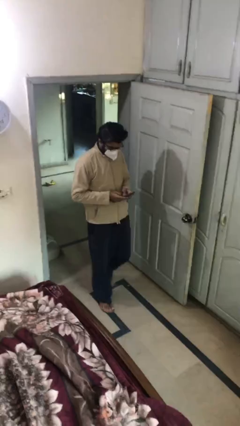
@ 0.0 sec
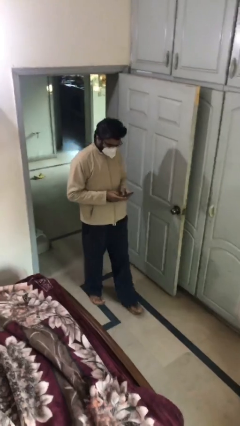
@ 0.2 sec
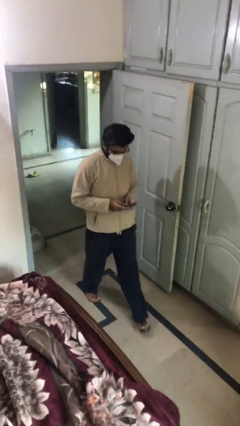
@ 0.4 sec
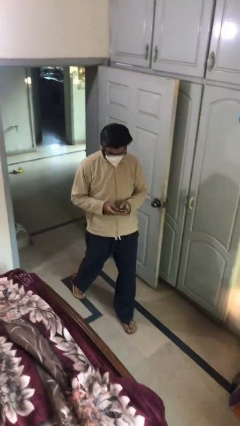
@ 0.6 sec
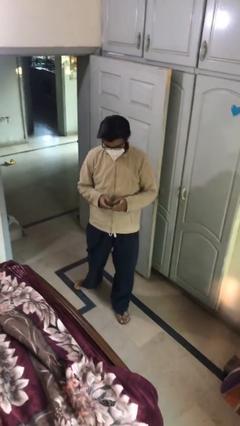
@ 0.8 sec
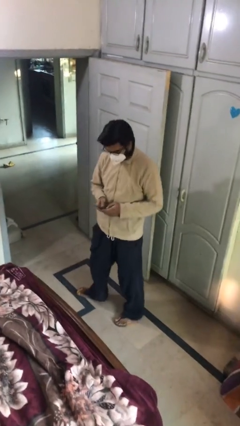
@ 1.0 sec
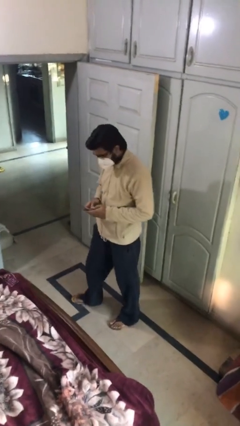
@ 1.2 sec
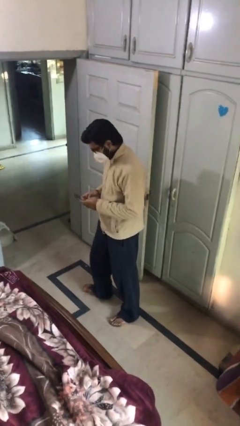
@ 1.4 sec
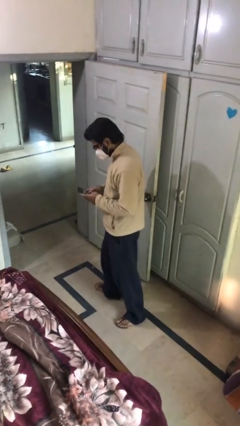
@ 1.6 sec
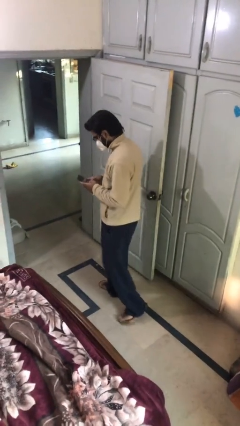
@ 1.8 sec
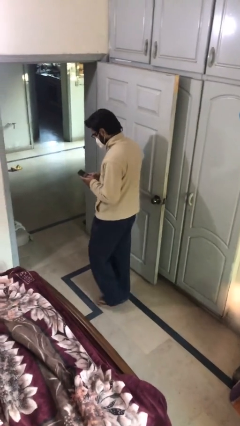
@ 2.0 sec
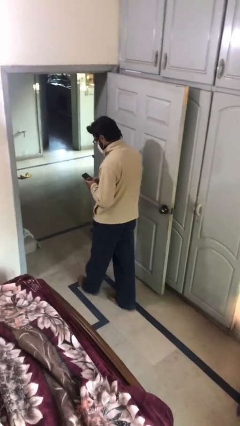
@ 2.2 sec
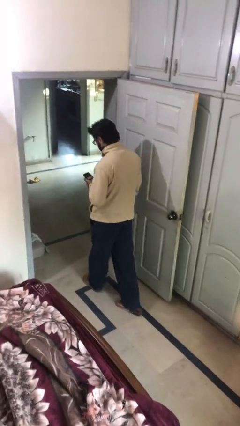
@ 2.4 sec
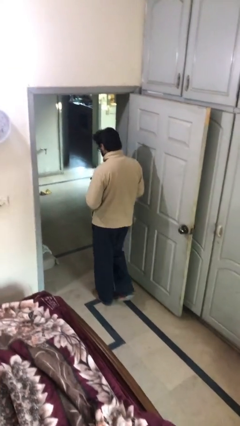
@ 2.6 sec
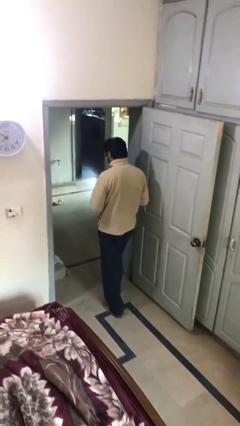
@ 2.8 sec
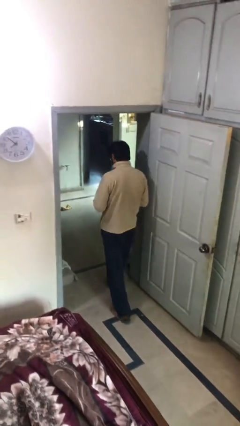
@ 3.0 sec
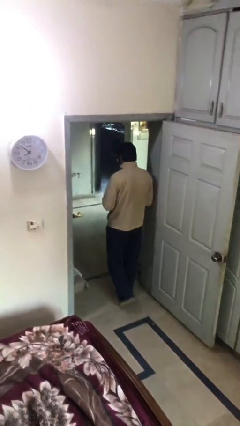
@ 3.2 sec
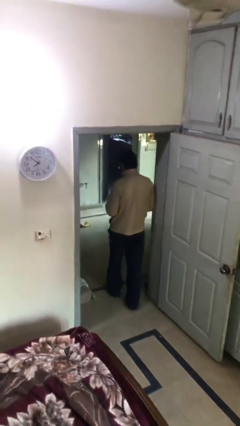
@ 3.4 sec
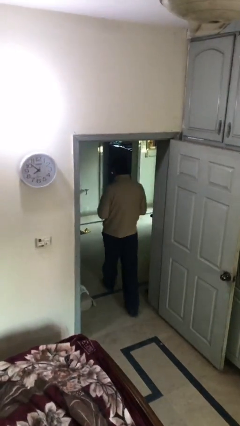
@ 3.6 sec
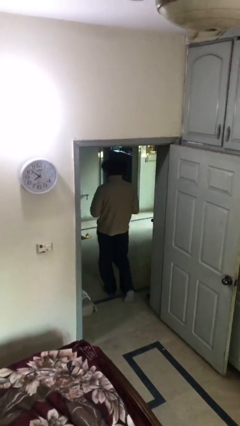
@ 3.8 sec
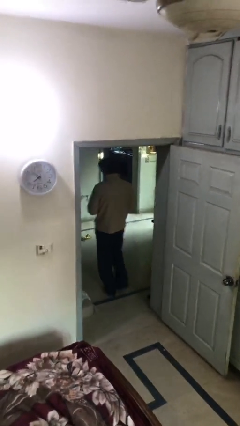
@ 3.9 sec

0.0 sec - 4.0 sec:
person exits scene through structure

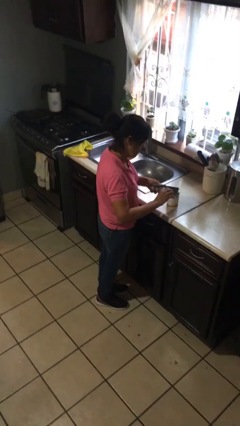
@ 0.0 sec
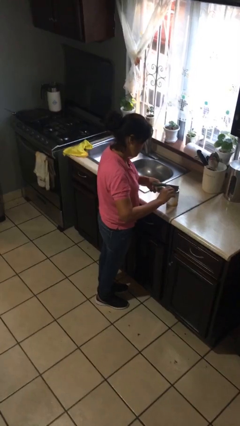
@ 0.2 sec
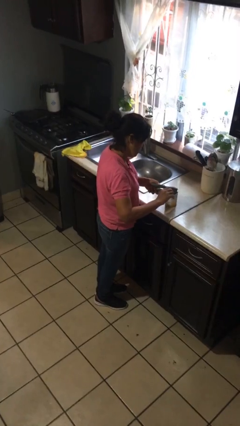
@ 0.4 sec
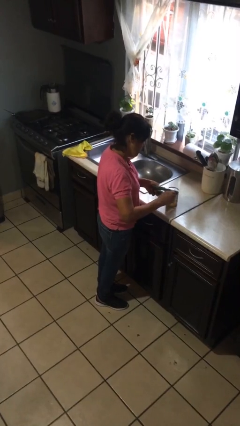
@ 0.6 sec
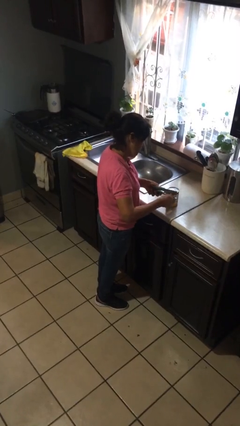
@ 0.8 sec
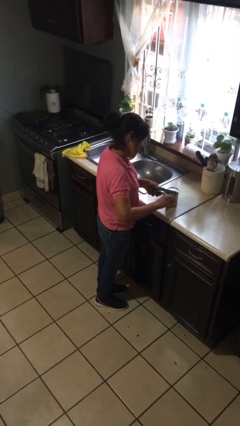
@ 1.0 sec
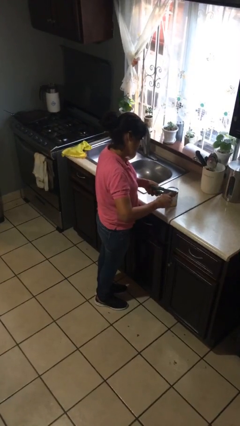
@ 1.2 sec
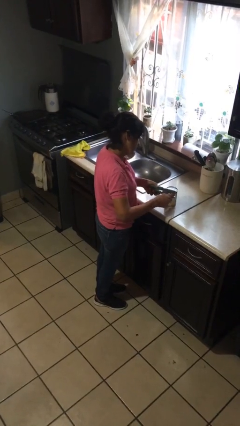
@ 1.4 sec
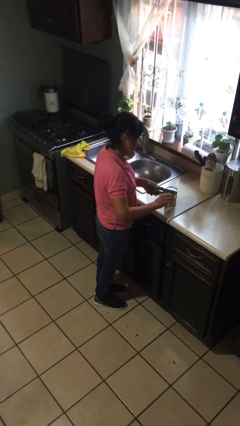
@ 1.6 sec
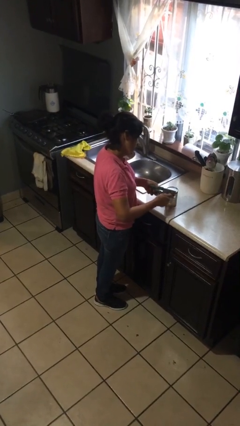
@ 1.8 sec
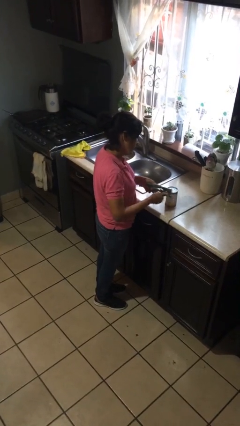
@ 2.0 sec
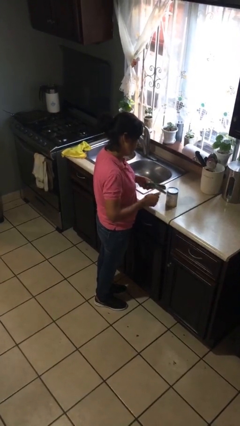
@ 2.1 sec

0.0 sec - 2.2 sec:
person opens can with can opener

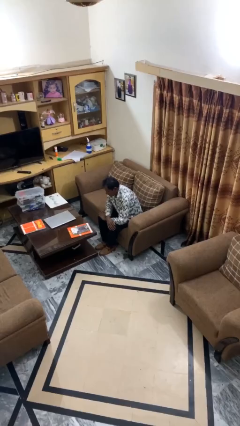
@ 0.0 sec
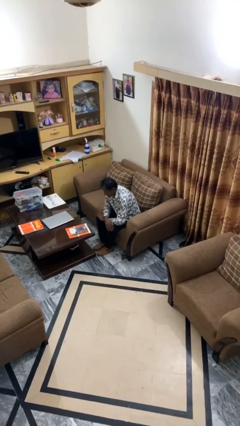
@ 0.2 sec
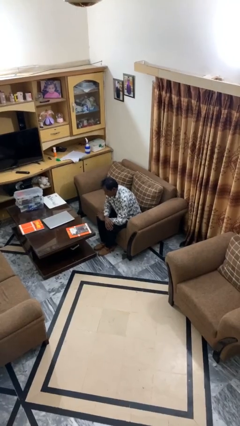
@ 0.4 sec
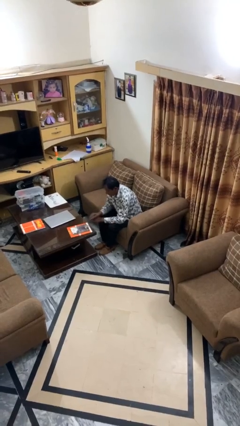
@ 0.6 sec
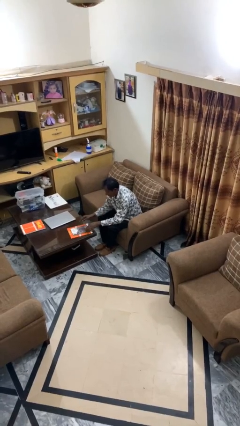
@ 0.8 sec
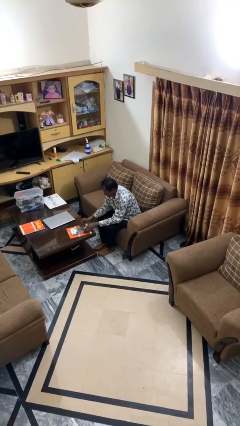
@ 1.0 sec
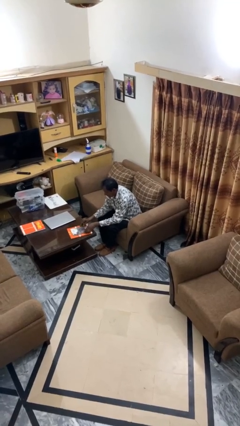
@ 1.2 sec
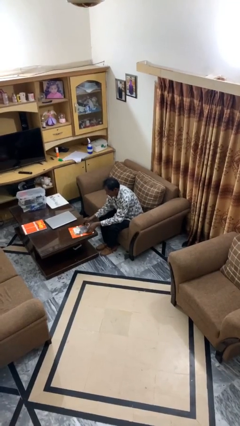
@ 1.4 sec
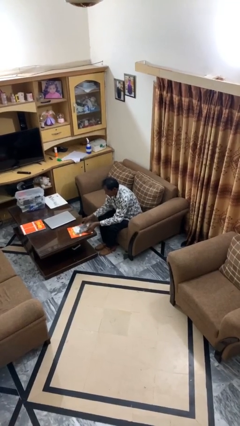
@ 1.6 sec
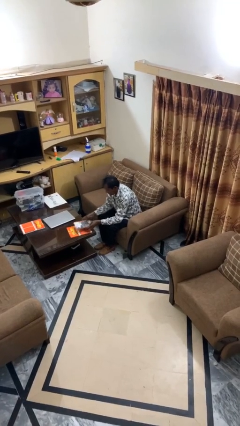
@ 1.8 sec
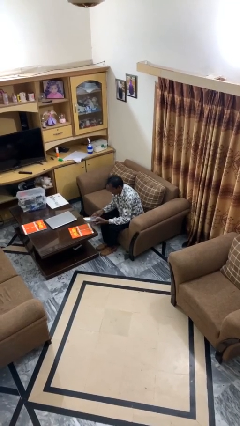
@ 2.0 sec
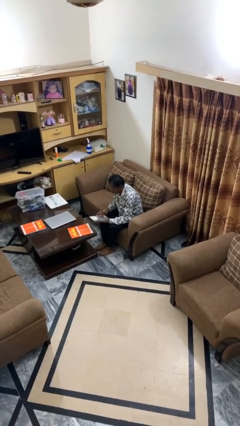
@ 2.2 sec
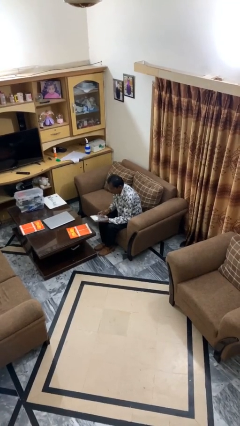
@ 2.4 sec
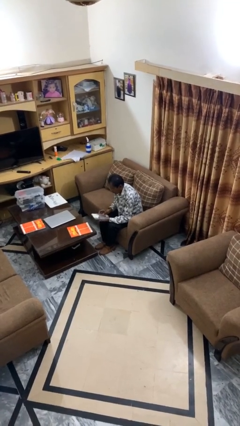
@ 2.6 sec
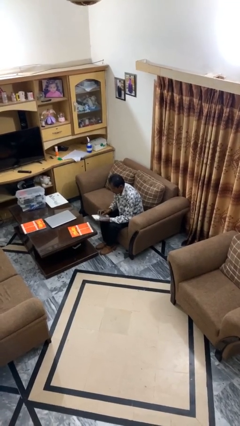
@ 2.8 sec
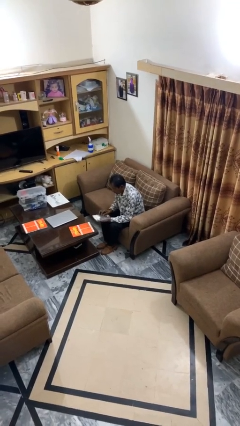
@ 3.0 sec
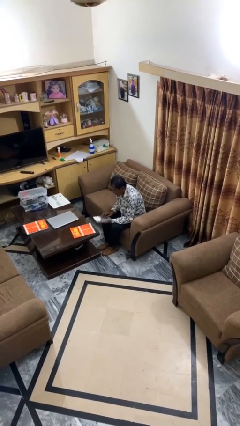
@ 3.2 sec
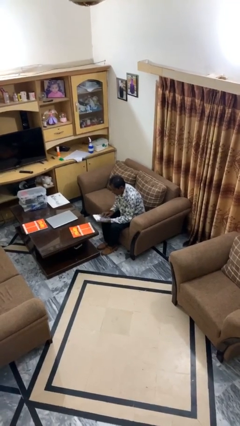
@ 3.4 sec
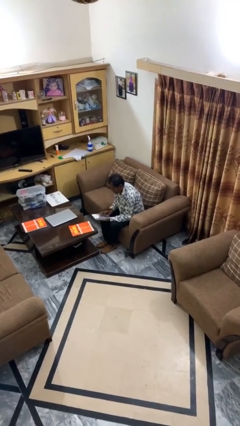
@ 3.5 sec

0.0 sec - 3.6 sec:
person picks up object from table

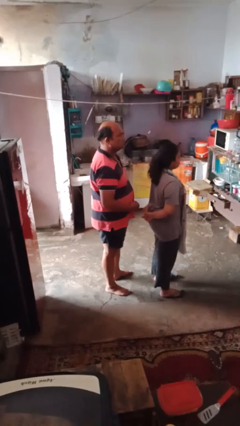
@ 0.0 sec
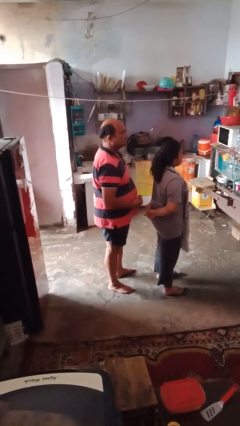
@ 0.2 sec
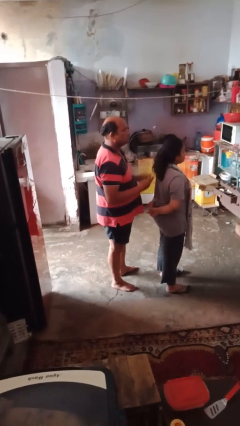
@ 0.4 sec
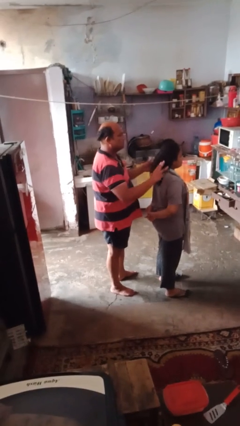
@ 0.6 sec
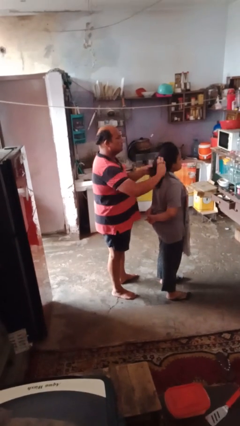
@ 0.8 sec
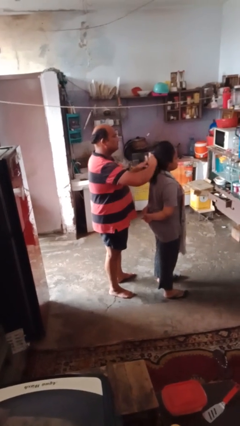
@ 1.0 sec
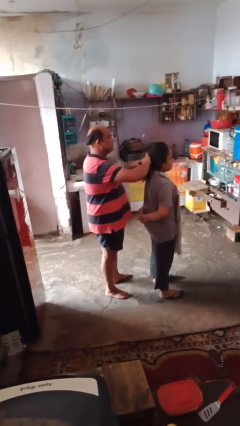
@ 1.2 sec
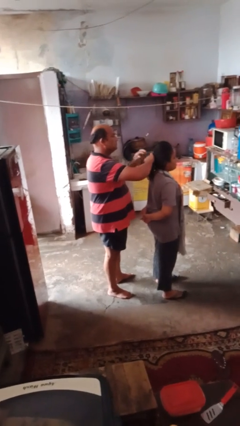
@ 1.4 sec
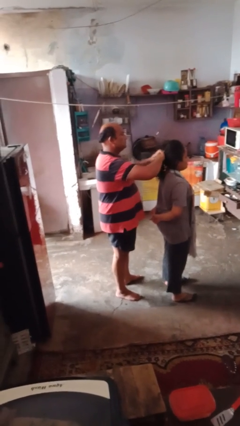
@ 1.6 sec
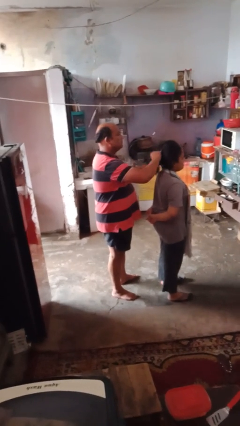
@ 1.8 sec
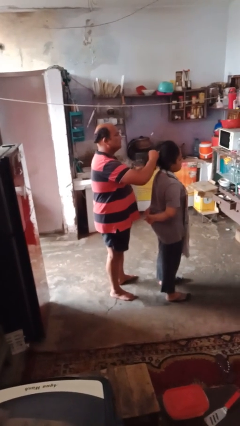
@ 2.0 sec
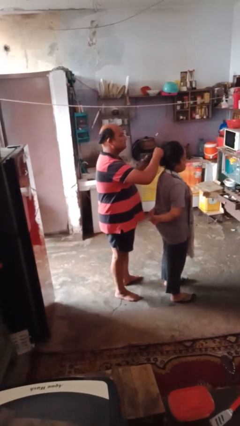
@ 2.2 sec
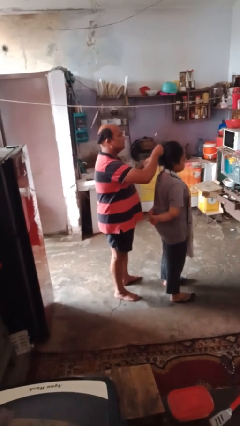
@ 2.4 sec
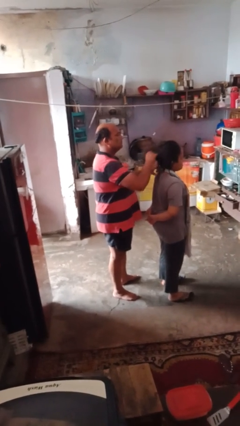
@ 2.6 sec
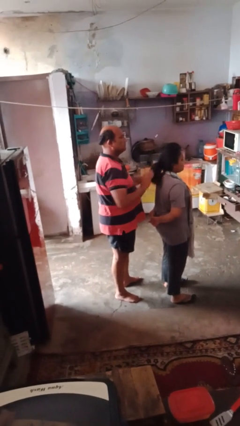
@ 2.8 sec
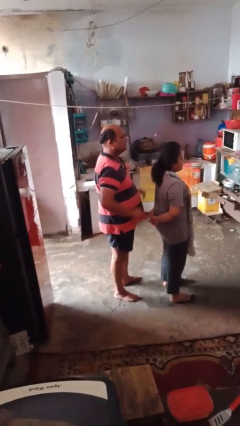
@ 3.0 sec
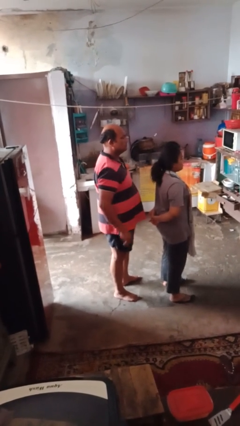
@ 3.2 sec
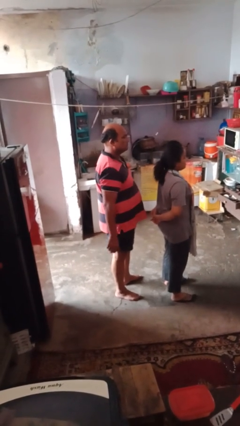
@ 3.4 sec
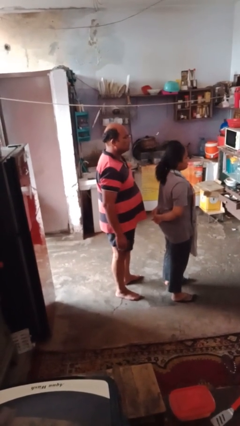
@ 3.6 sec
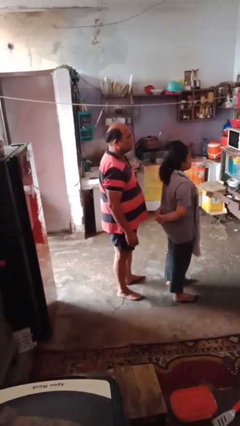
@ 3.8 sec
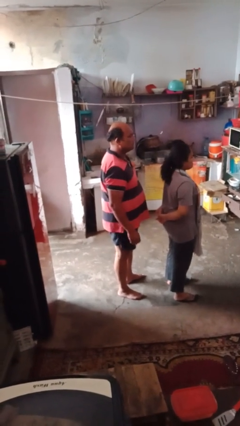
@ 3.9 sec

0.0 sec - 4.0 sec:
person braids hair of person

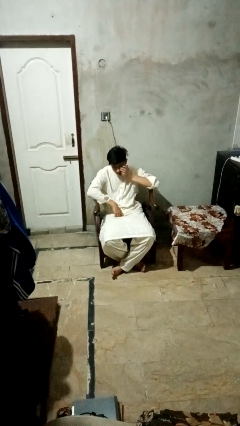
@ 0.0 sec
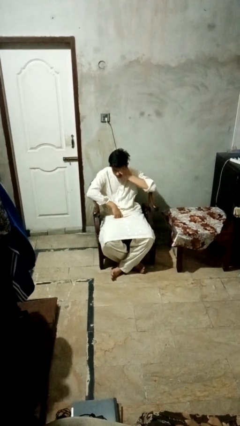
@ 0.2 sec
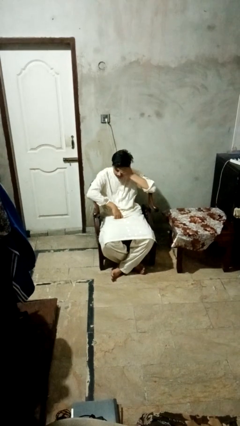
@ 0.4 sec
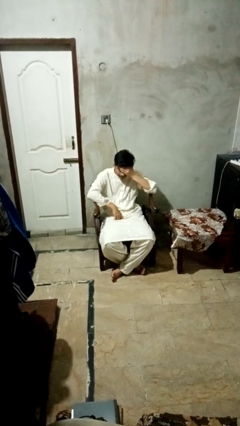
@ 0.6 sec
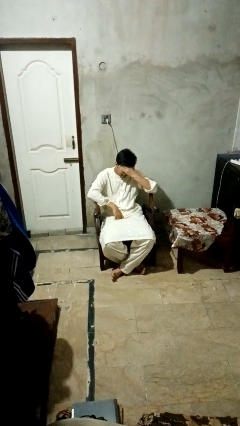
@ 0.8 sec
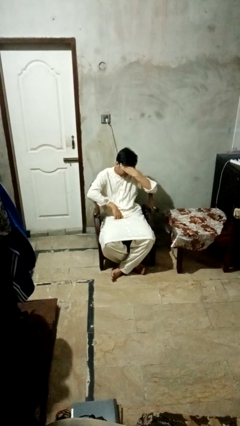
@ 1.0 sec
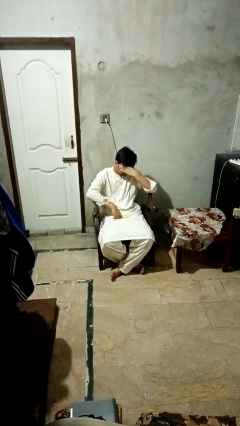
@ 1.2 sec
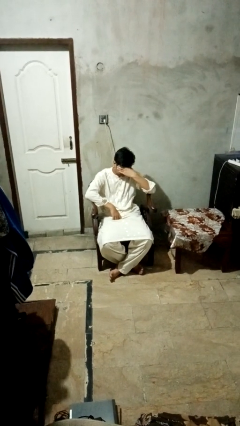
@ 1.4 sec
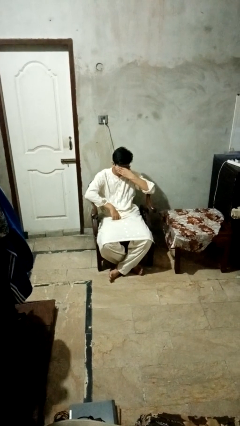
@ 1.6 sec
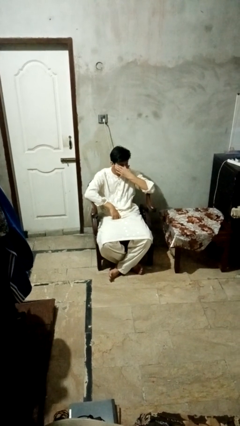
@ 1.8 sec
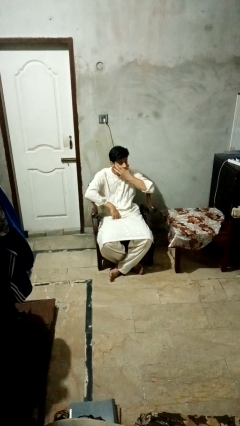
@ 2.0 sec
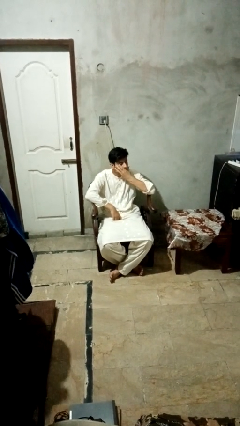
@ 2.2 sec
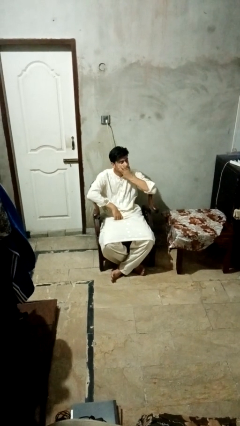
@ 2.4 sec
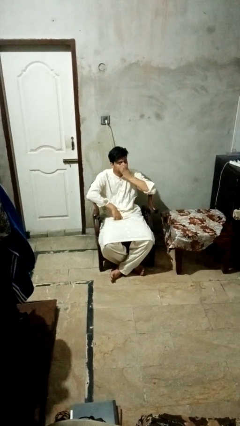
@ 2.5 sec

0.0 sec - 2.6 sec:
person covers face with hands

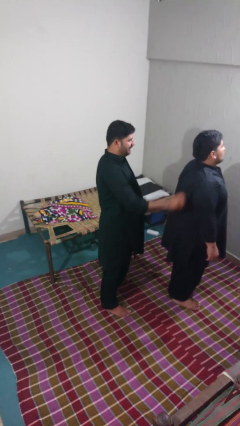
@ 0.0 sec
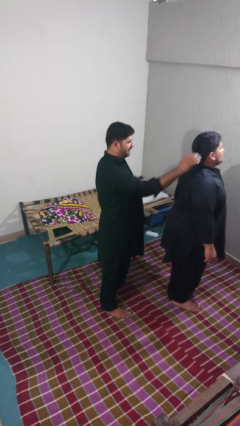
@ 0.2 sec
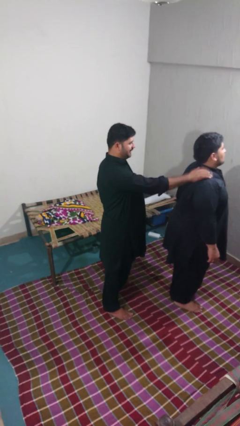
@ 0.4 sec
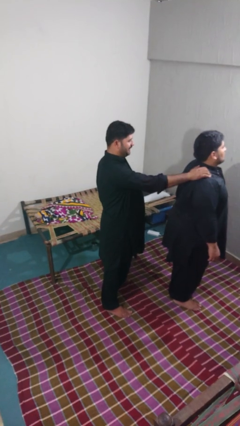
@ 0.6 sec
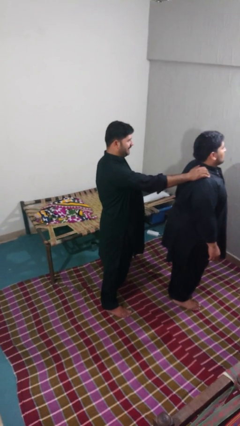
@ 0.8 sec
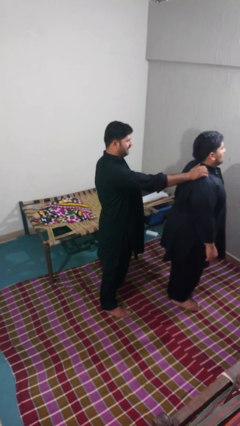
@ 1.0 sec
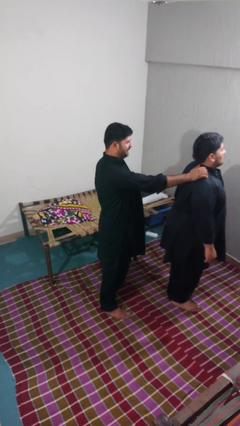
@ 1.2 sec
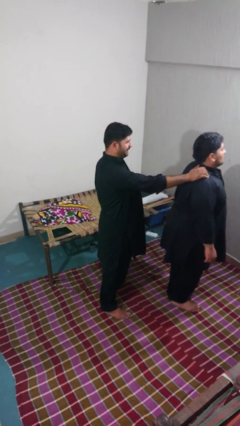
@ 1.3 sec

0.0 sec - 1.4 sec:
person touches back of person
